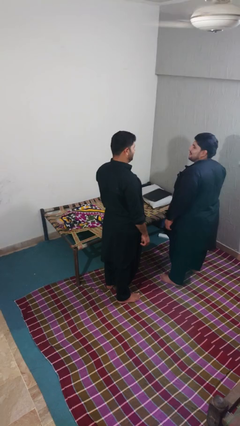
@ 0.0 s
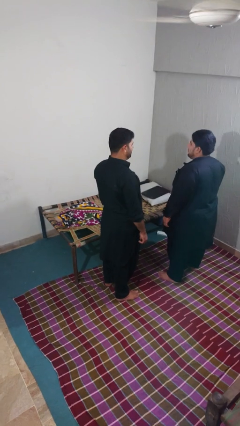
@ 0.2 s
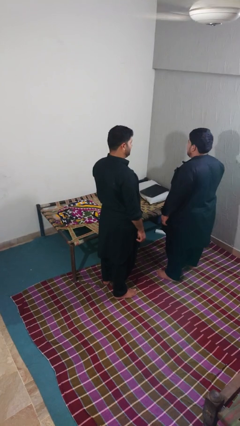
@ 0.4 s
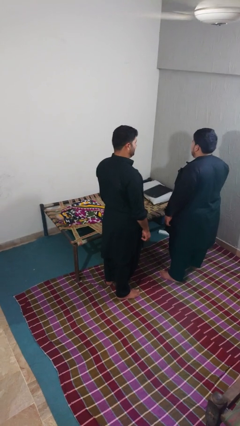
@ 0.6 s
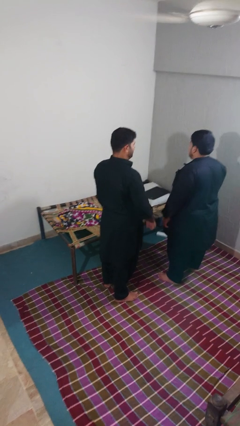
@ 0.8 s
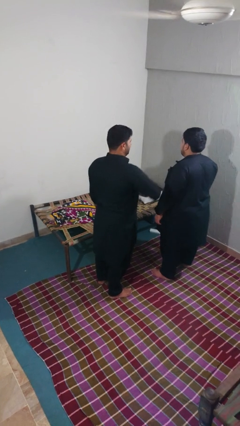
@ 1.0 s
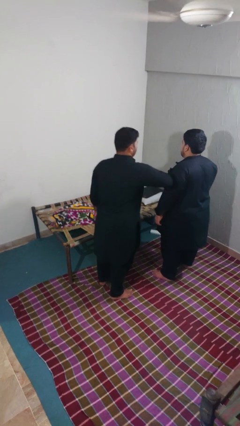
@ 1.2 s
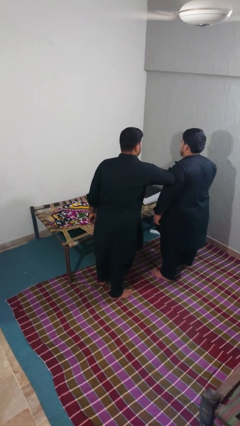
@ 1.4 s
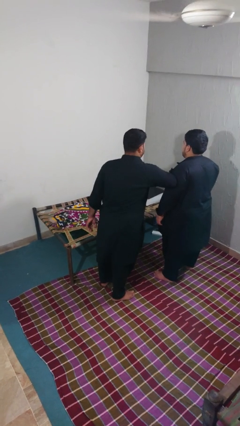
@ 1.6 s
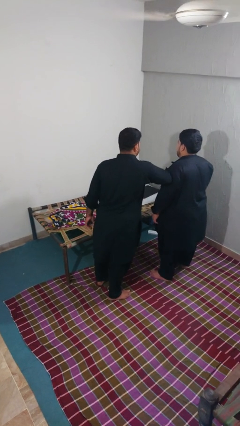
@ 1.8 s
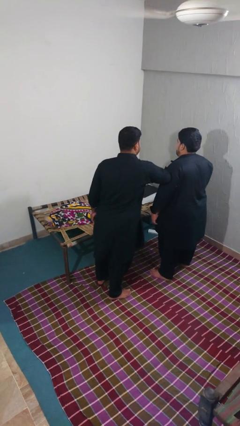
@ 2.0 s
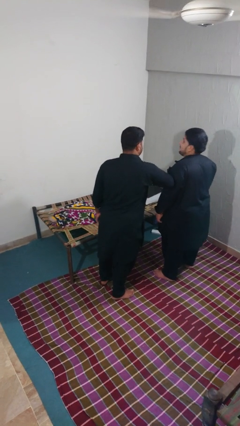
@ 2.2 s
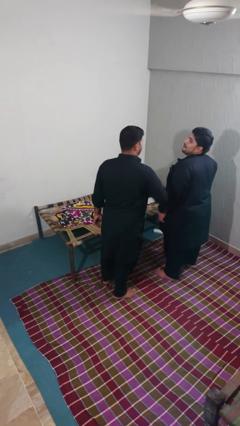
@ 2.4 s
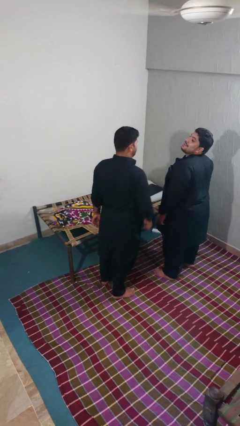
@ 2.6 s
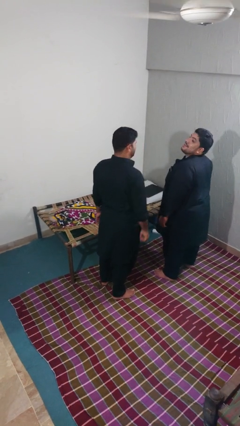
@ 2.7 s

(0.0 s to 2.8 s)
person nudges person with elbow

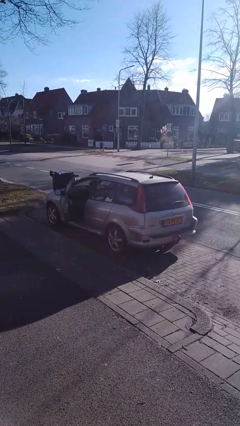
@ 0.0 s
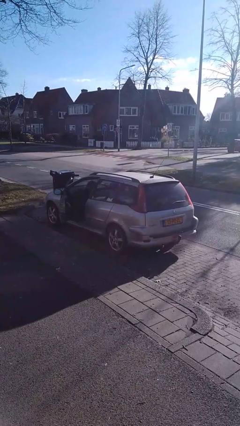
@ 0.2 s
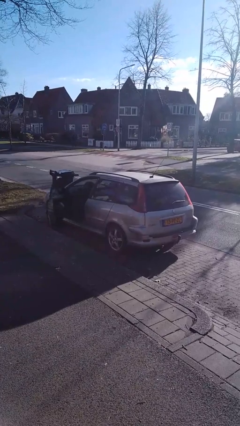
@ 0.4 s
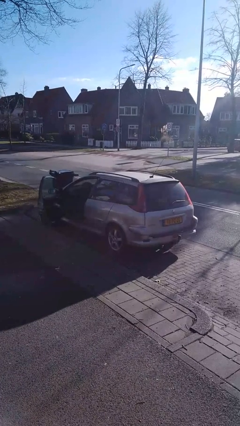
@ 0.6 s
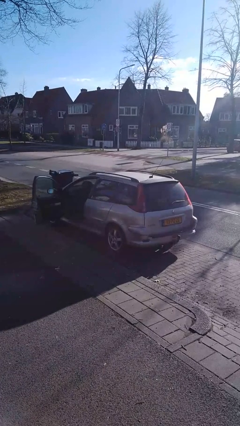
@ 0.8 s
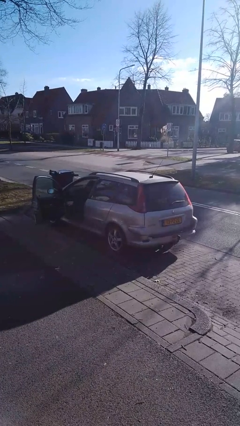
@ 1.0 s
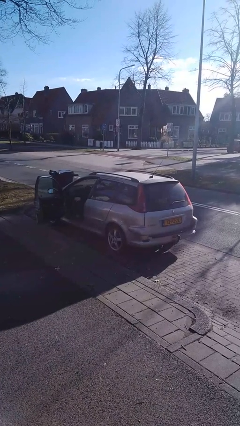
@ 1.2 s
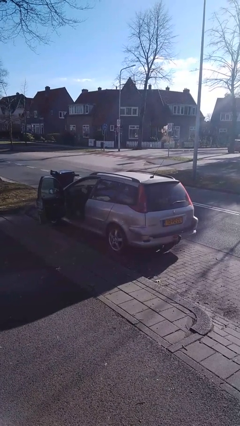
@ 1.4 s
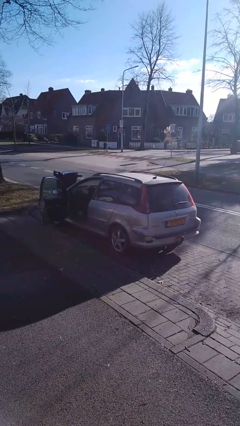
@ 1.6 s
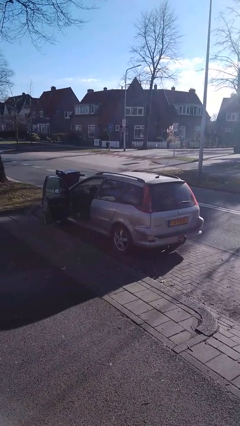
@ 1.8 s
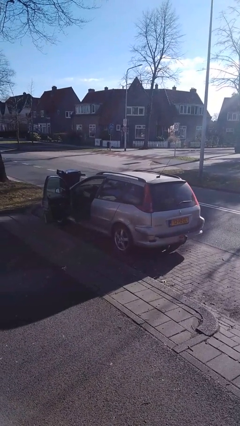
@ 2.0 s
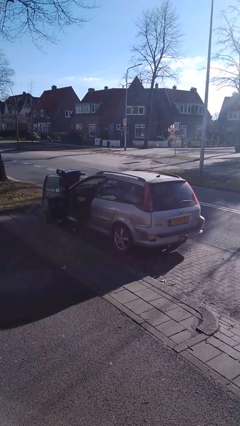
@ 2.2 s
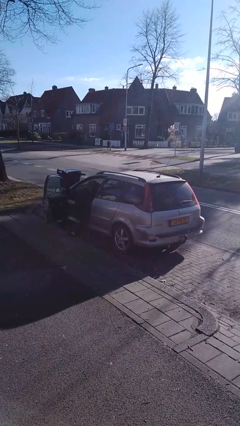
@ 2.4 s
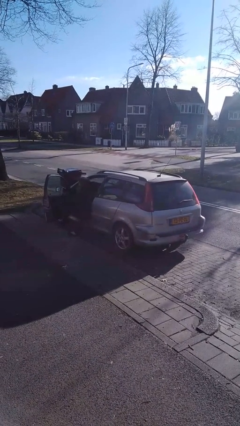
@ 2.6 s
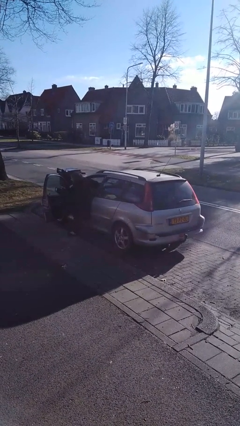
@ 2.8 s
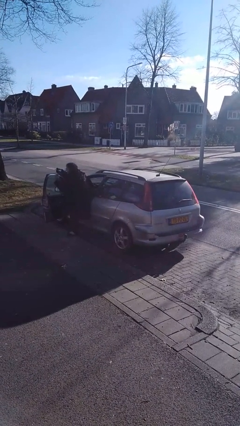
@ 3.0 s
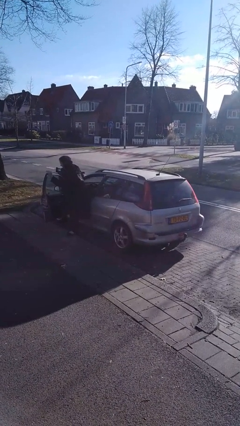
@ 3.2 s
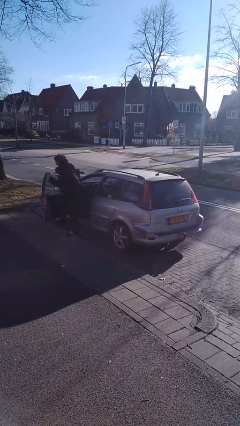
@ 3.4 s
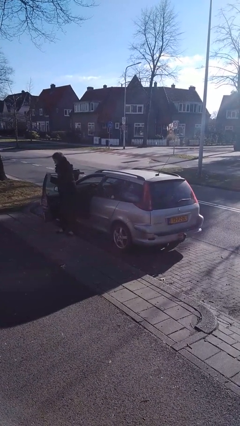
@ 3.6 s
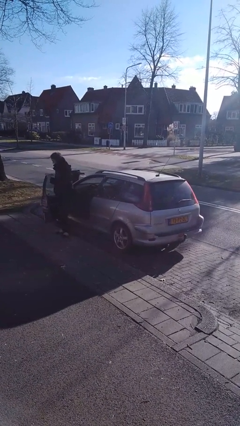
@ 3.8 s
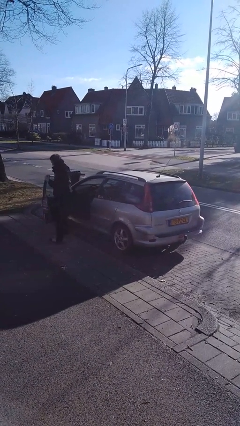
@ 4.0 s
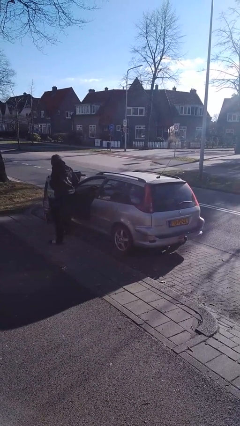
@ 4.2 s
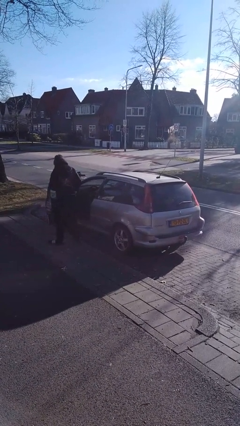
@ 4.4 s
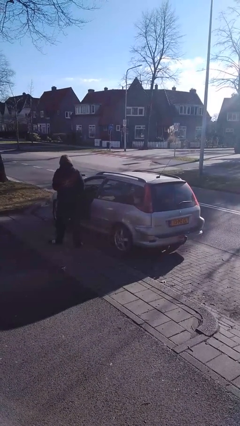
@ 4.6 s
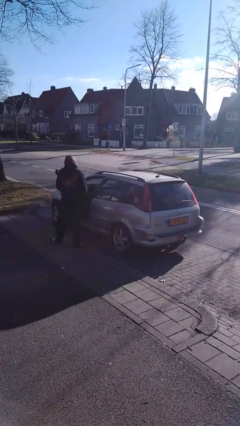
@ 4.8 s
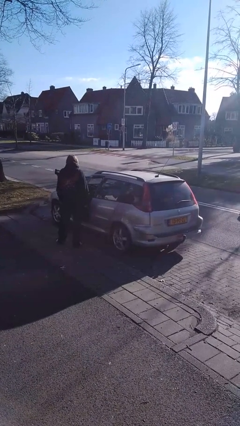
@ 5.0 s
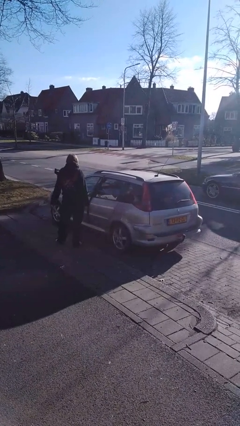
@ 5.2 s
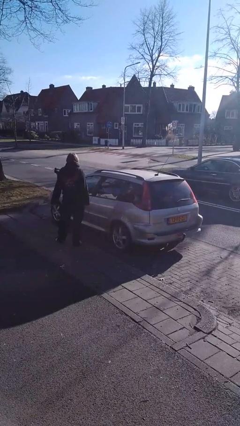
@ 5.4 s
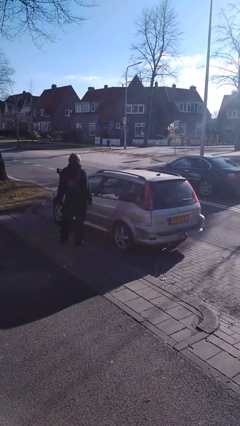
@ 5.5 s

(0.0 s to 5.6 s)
car drops off person

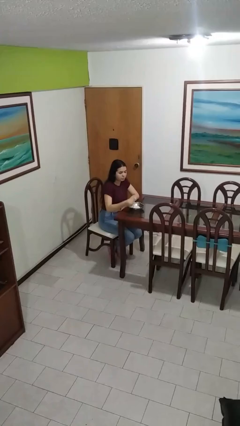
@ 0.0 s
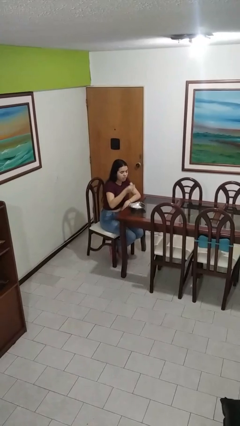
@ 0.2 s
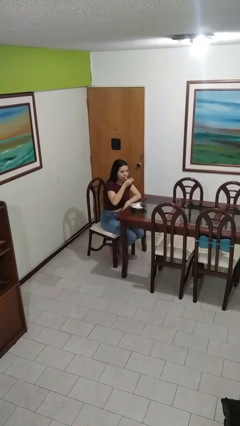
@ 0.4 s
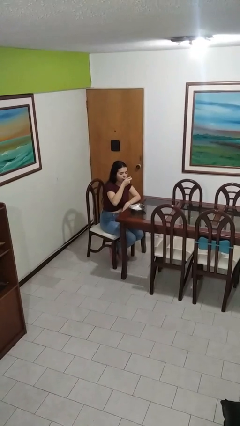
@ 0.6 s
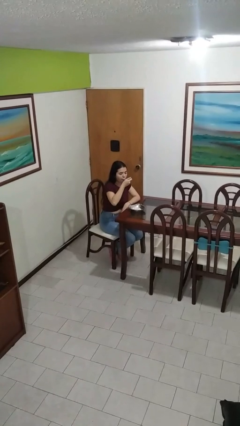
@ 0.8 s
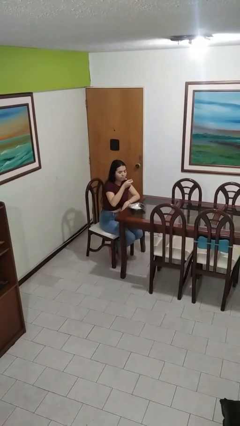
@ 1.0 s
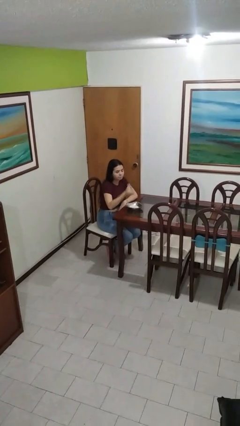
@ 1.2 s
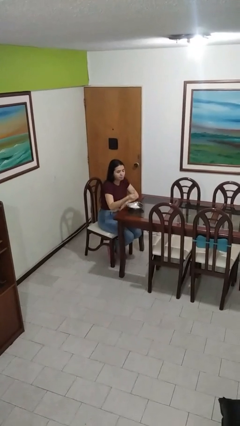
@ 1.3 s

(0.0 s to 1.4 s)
person eats with utensil

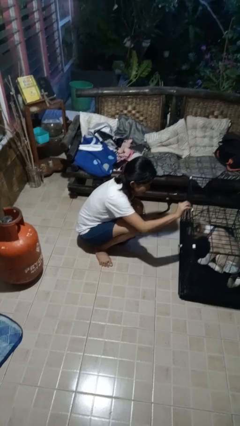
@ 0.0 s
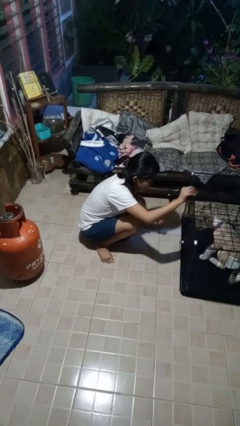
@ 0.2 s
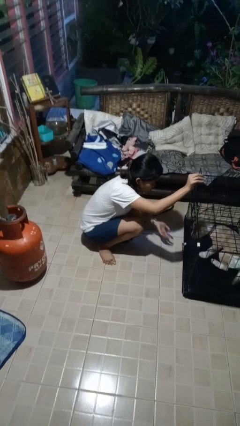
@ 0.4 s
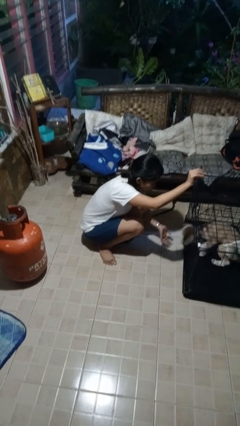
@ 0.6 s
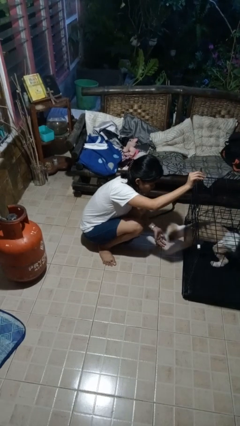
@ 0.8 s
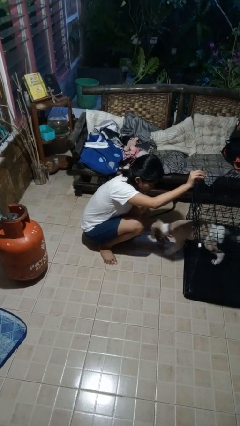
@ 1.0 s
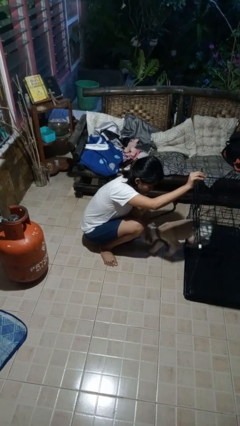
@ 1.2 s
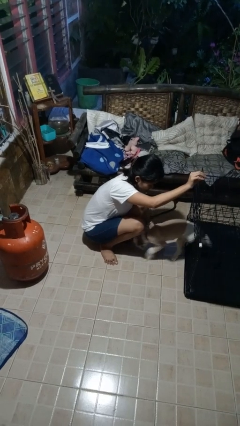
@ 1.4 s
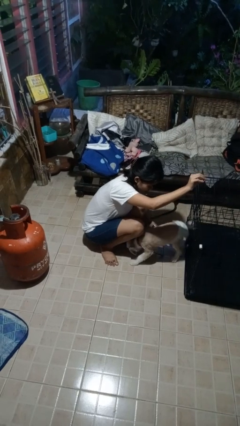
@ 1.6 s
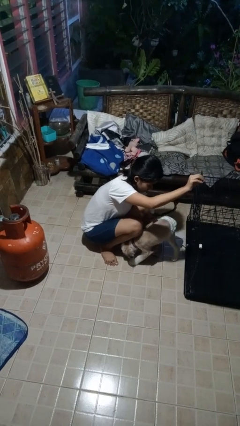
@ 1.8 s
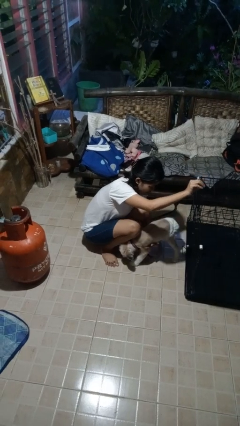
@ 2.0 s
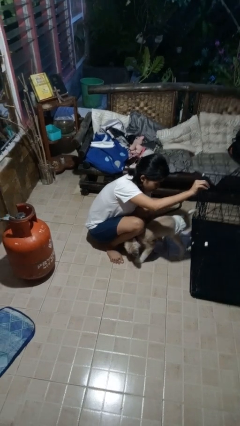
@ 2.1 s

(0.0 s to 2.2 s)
person uncrates dog

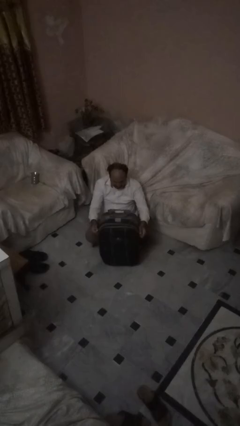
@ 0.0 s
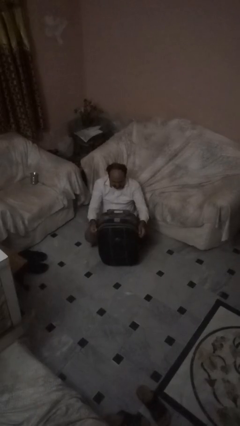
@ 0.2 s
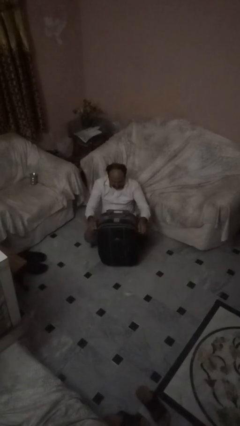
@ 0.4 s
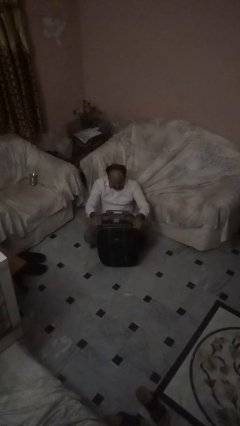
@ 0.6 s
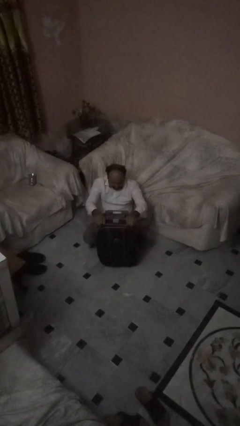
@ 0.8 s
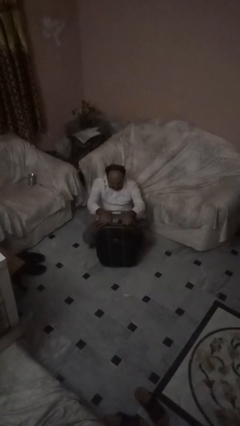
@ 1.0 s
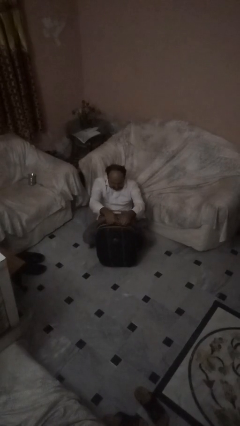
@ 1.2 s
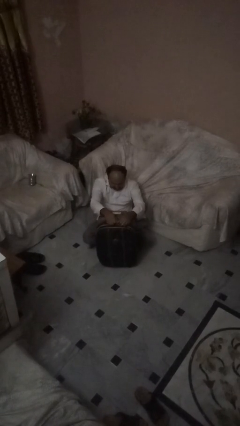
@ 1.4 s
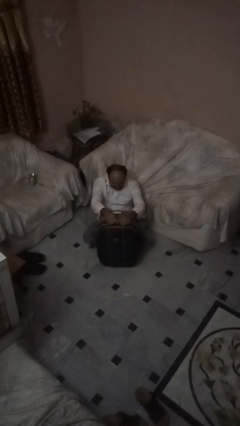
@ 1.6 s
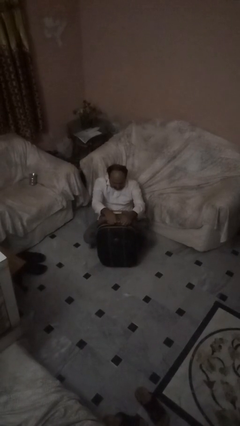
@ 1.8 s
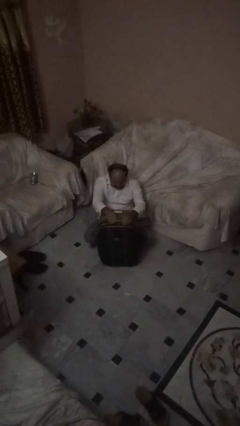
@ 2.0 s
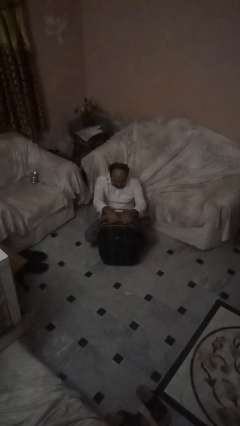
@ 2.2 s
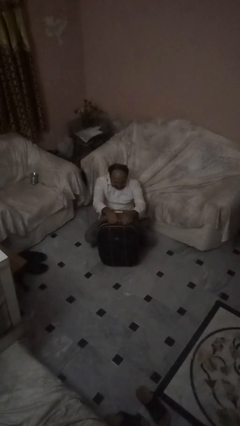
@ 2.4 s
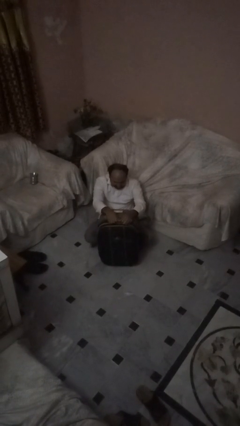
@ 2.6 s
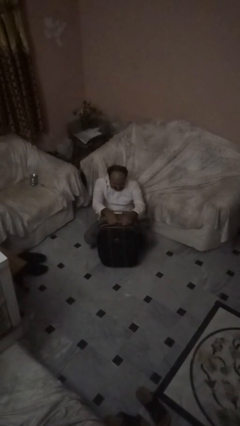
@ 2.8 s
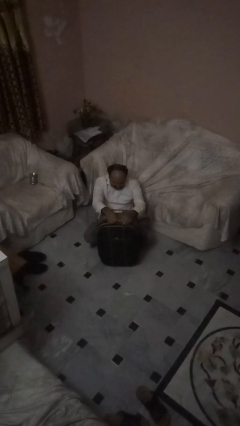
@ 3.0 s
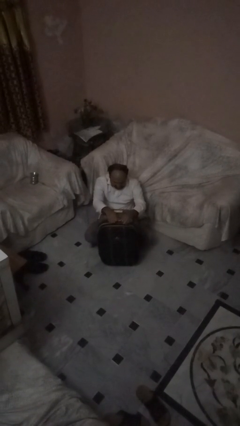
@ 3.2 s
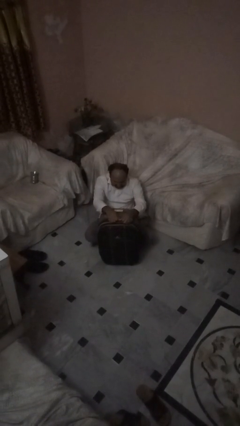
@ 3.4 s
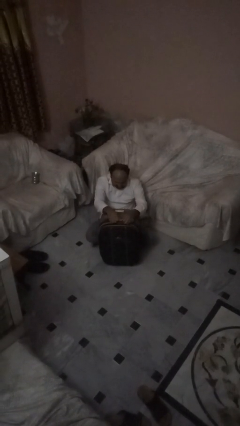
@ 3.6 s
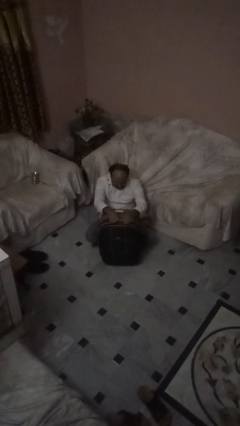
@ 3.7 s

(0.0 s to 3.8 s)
person closes suitcase

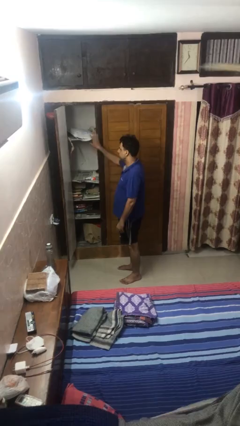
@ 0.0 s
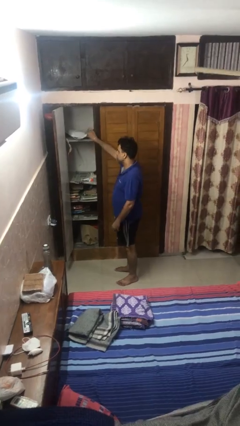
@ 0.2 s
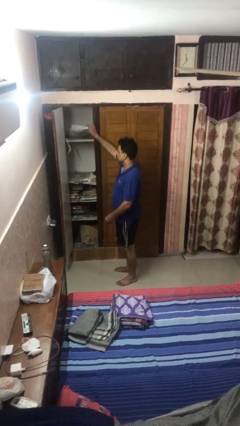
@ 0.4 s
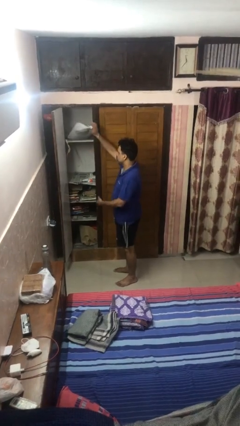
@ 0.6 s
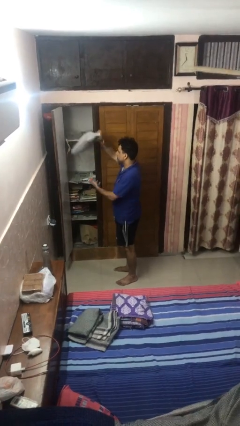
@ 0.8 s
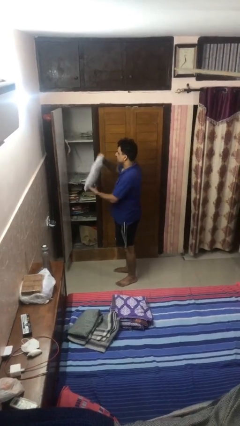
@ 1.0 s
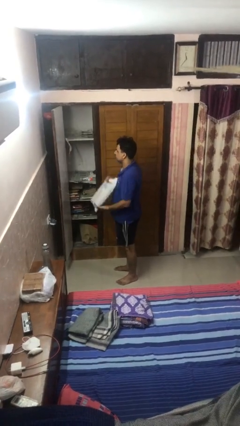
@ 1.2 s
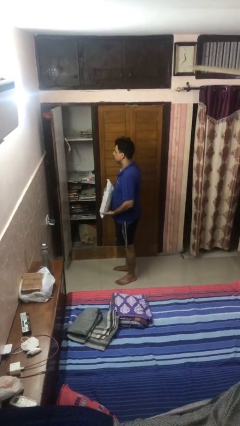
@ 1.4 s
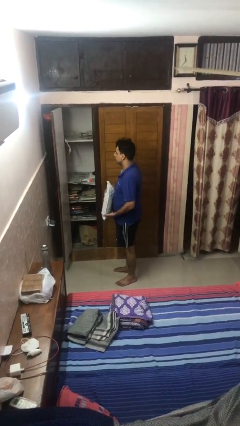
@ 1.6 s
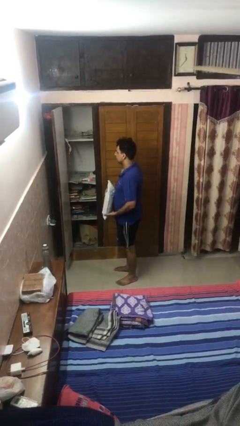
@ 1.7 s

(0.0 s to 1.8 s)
person picks up object from shelf
